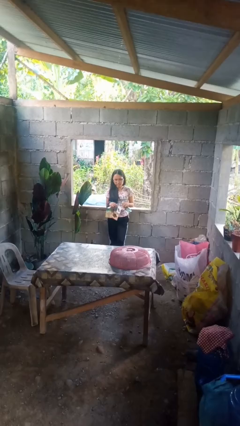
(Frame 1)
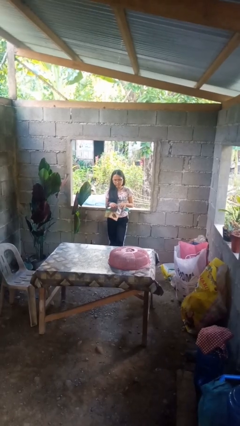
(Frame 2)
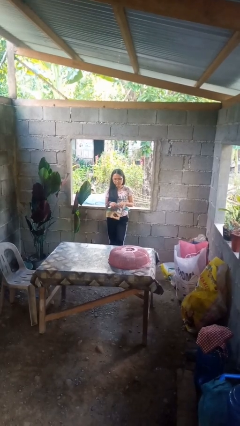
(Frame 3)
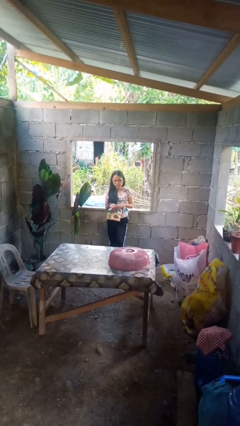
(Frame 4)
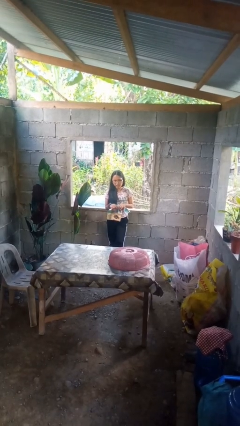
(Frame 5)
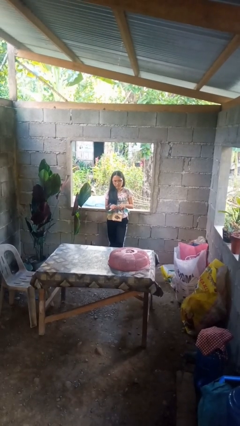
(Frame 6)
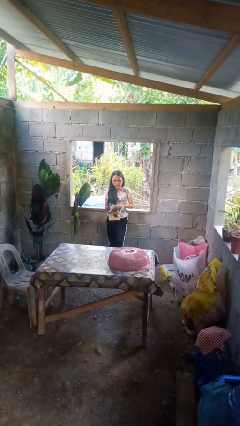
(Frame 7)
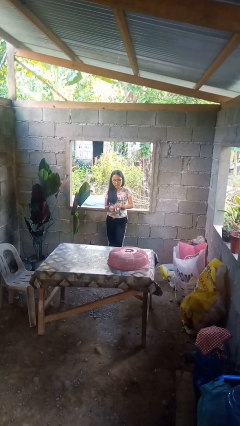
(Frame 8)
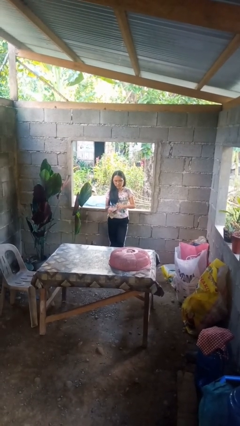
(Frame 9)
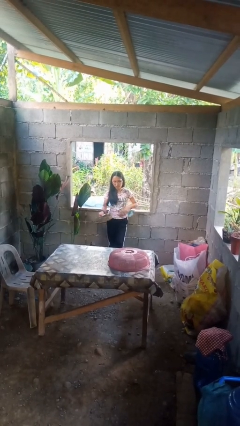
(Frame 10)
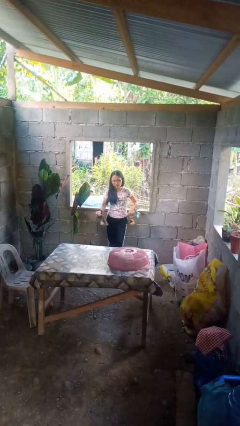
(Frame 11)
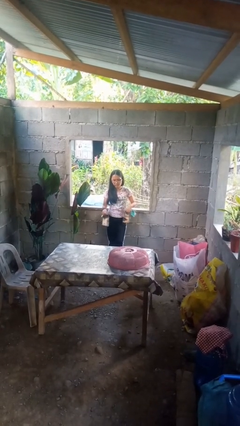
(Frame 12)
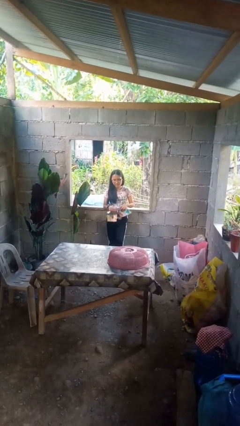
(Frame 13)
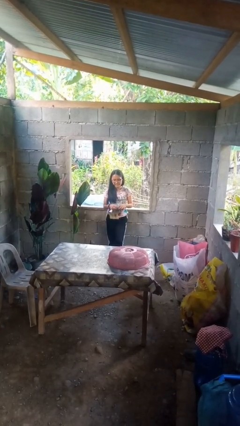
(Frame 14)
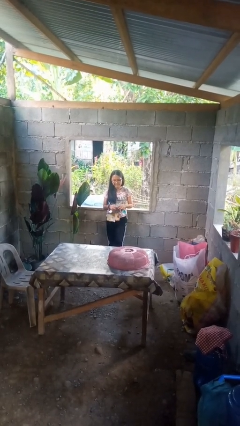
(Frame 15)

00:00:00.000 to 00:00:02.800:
person tears paper

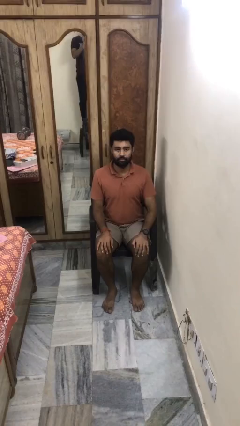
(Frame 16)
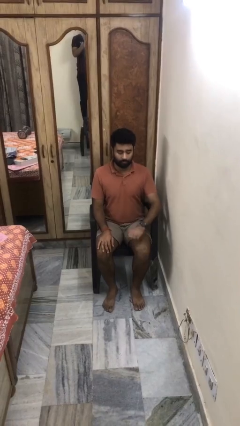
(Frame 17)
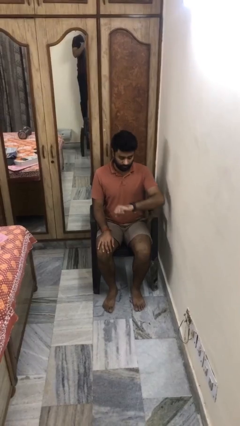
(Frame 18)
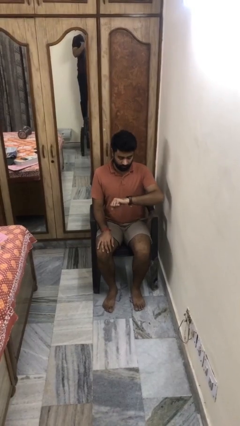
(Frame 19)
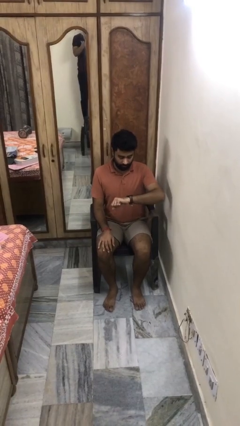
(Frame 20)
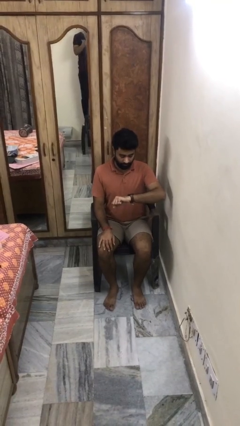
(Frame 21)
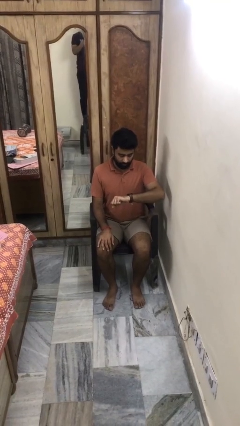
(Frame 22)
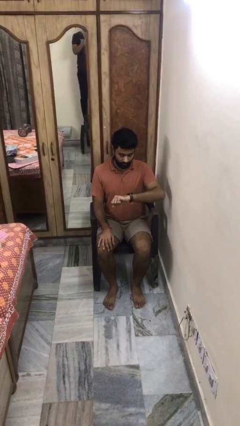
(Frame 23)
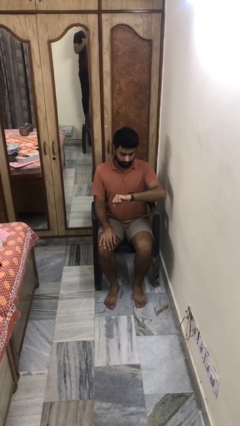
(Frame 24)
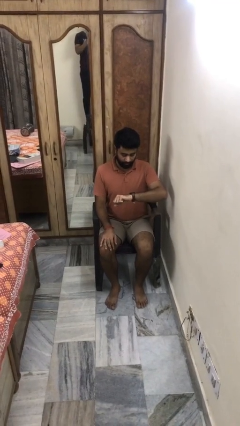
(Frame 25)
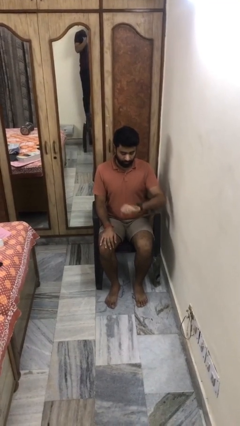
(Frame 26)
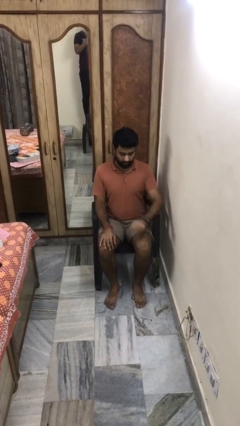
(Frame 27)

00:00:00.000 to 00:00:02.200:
person looks at wristwatch

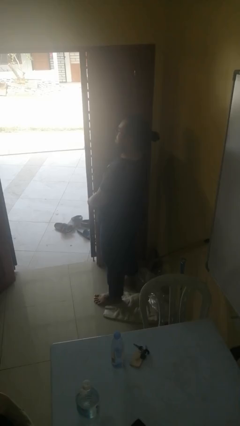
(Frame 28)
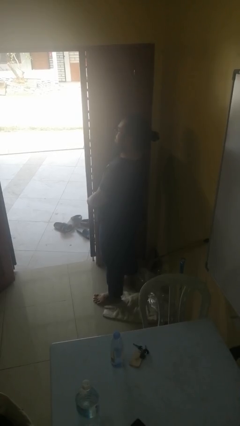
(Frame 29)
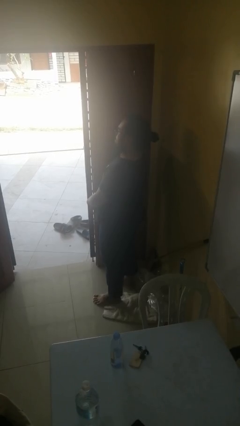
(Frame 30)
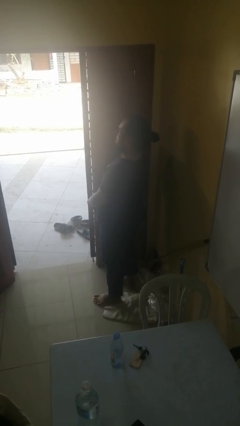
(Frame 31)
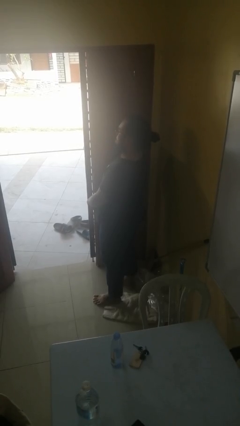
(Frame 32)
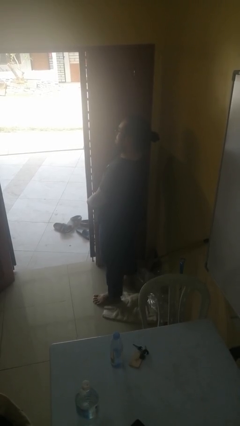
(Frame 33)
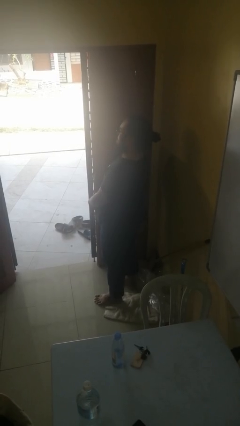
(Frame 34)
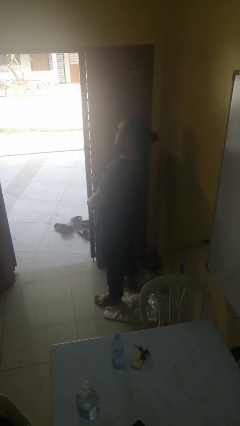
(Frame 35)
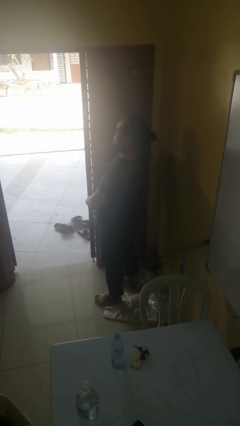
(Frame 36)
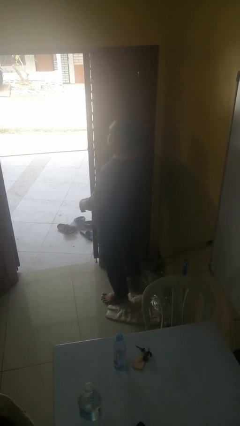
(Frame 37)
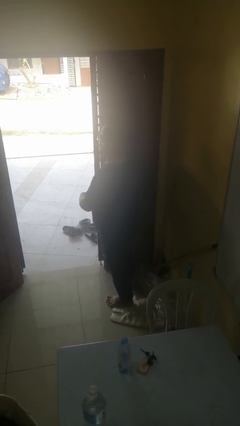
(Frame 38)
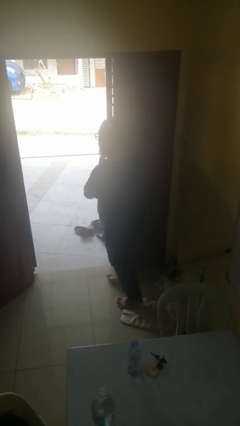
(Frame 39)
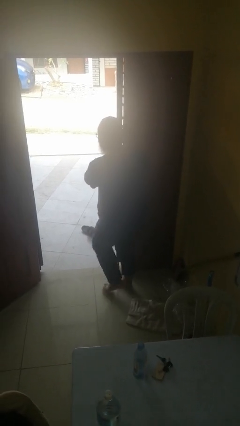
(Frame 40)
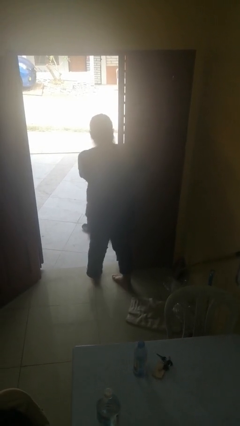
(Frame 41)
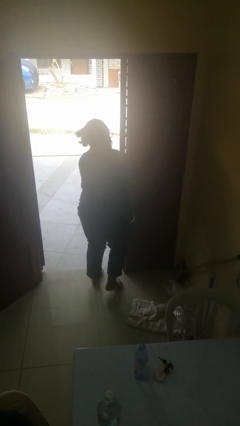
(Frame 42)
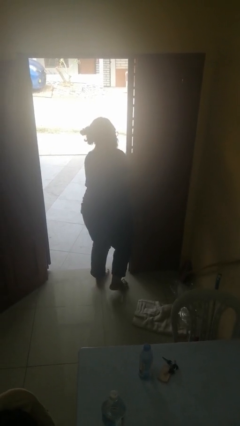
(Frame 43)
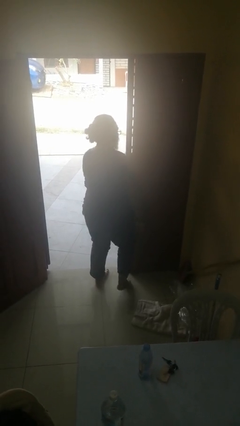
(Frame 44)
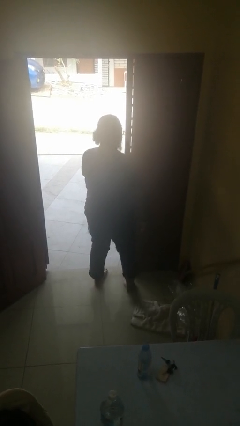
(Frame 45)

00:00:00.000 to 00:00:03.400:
person bumps into wall

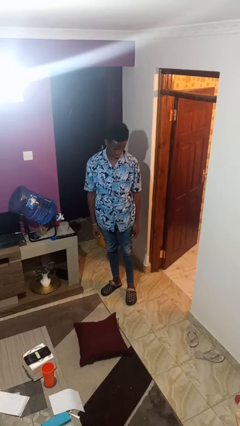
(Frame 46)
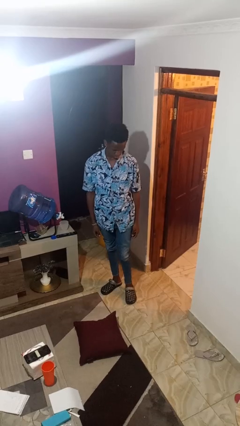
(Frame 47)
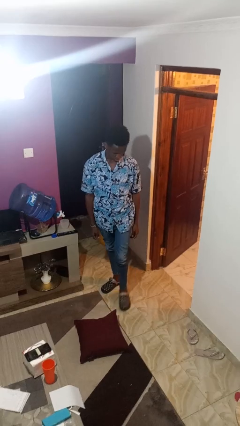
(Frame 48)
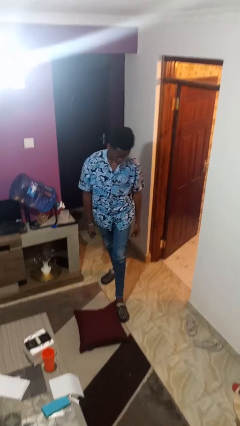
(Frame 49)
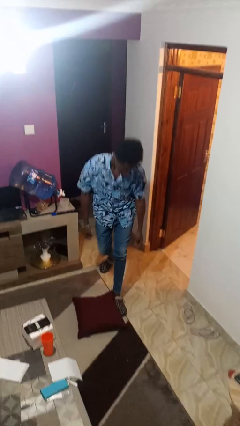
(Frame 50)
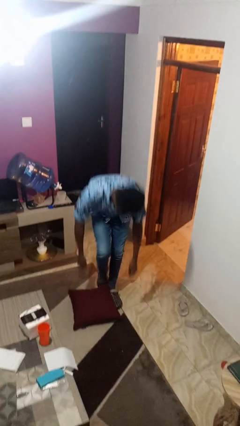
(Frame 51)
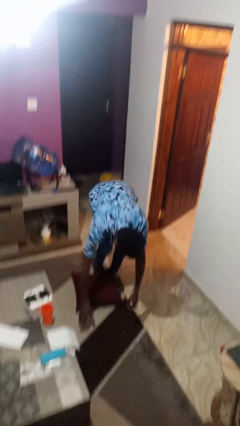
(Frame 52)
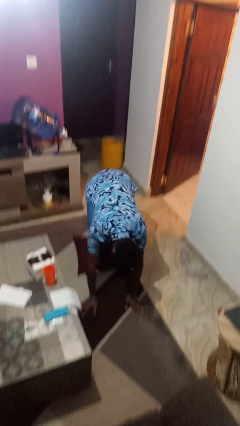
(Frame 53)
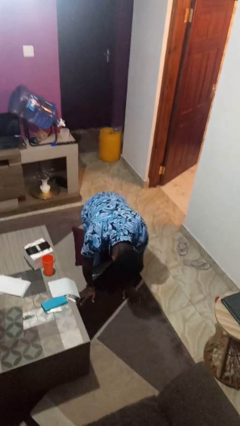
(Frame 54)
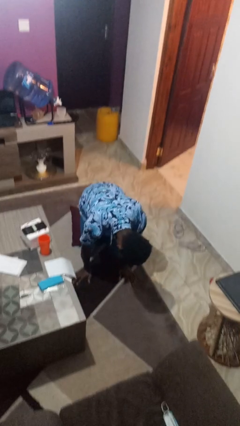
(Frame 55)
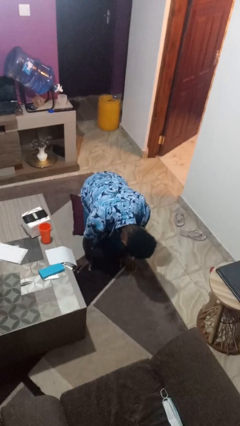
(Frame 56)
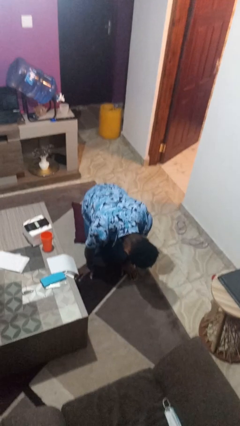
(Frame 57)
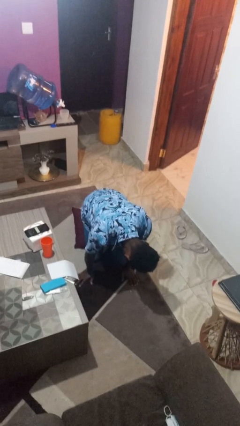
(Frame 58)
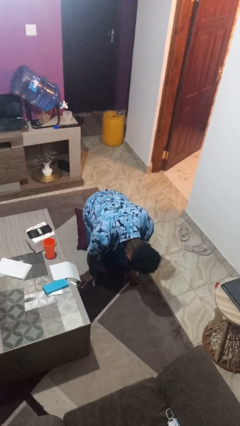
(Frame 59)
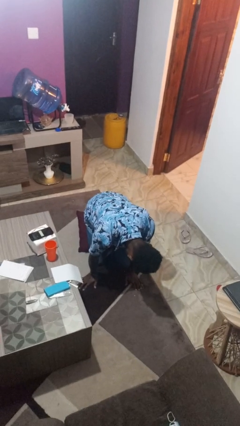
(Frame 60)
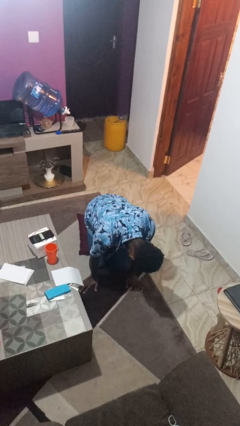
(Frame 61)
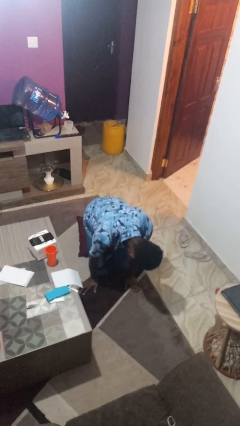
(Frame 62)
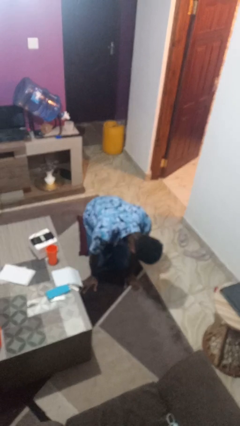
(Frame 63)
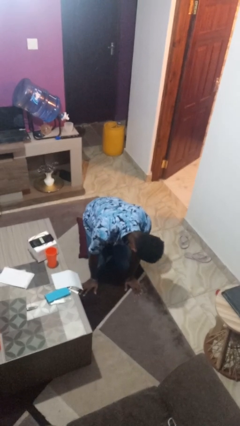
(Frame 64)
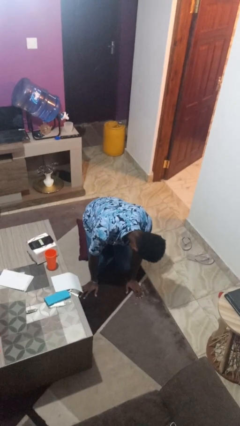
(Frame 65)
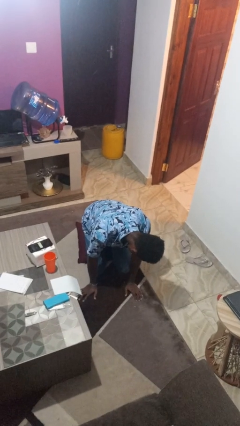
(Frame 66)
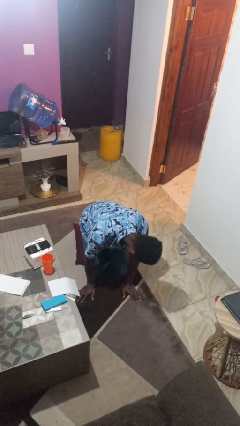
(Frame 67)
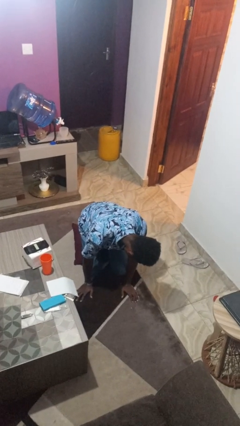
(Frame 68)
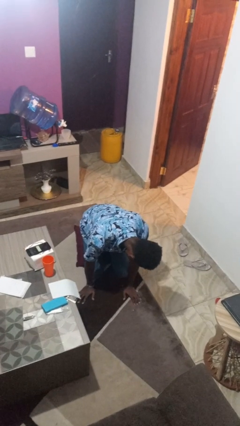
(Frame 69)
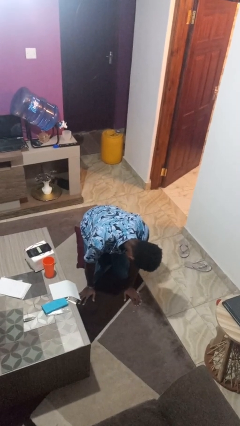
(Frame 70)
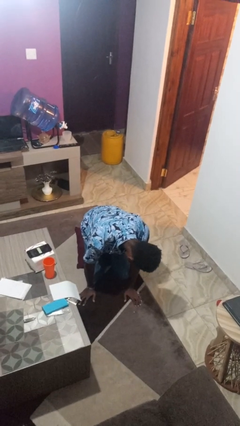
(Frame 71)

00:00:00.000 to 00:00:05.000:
person trips on object on floor

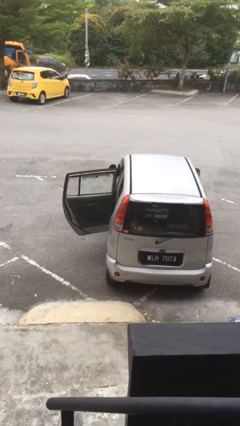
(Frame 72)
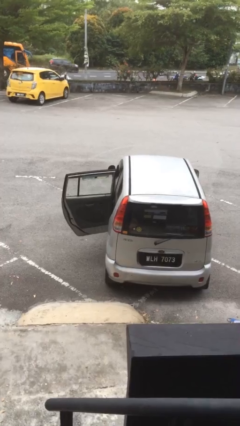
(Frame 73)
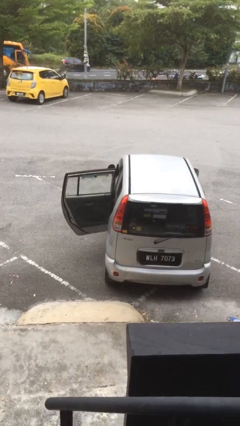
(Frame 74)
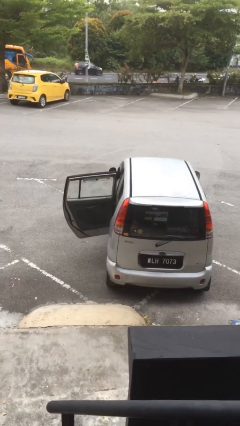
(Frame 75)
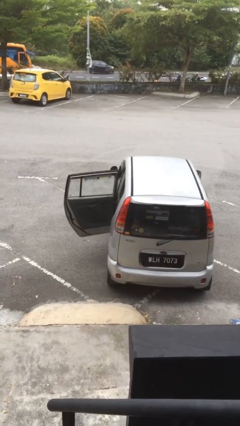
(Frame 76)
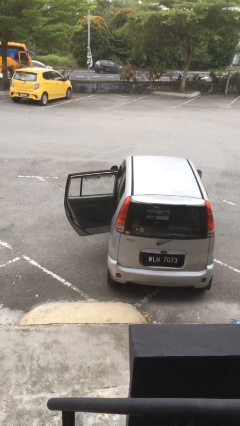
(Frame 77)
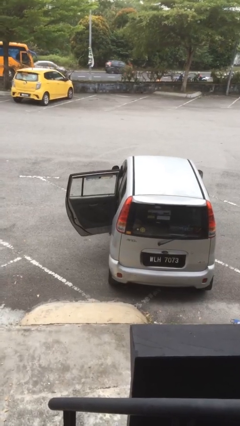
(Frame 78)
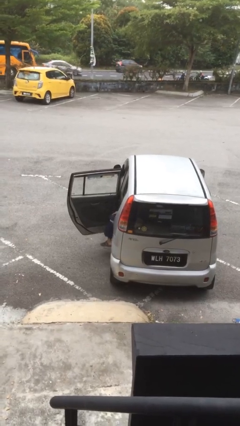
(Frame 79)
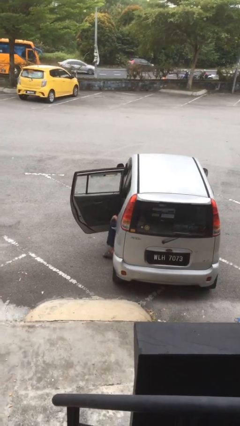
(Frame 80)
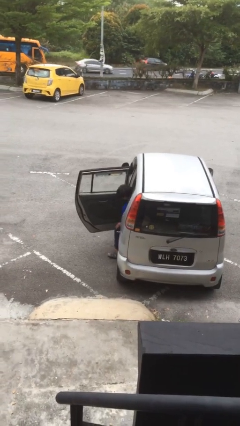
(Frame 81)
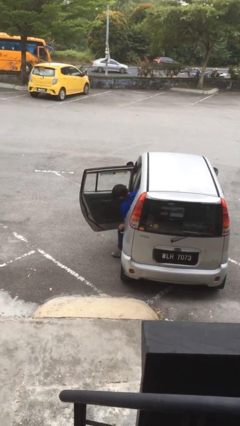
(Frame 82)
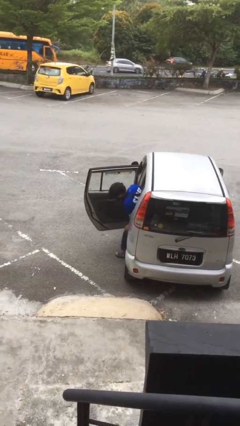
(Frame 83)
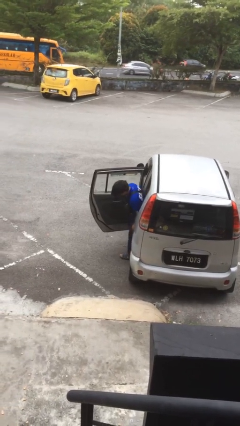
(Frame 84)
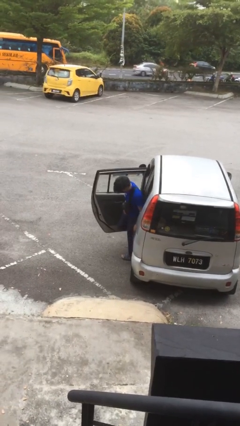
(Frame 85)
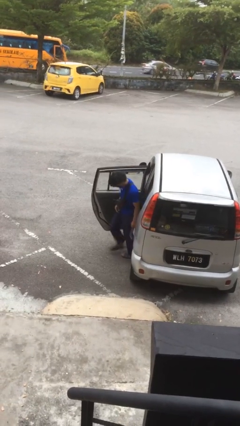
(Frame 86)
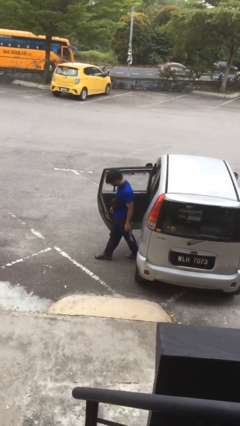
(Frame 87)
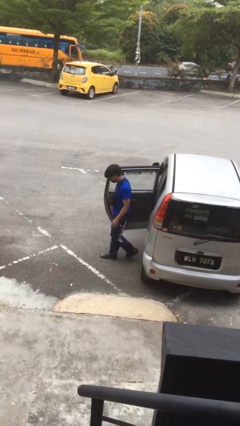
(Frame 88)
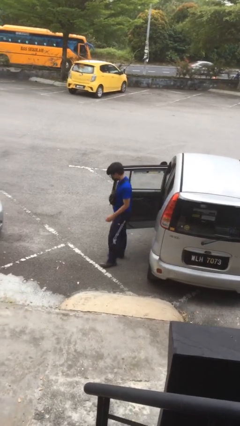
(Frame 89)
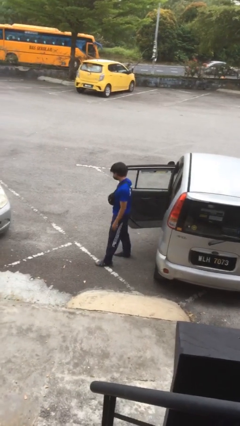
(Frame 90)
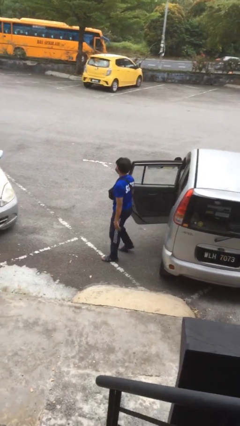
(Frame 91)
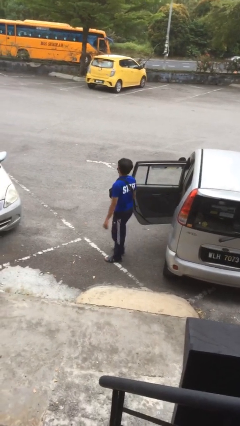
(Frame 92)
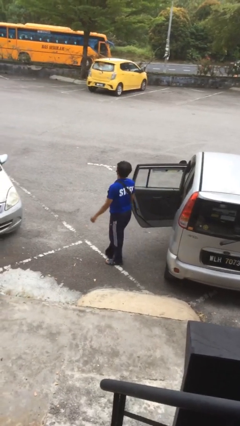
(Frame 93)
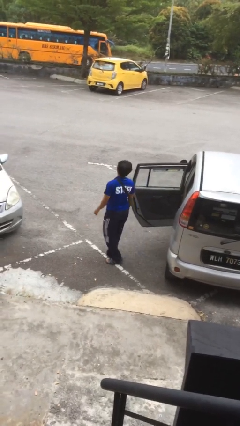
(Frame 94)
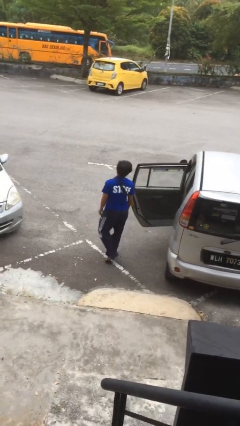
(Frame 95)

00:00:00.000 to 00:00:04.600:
person exits car
